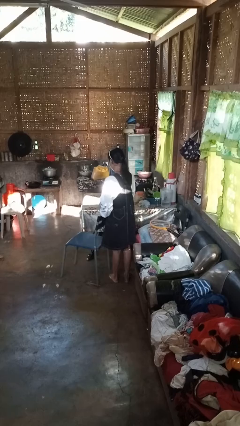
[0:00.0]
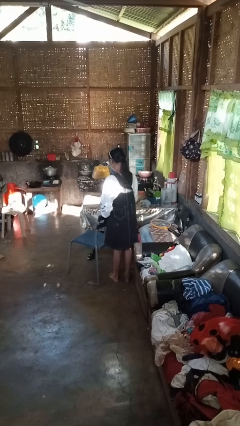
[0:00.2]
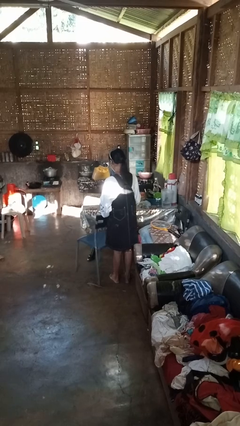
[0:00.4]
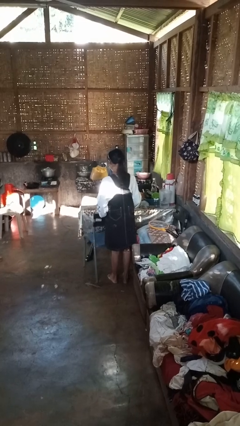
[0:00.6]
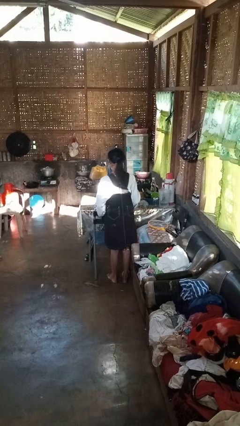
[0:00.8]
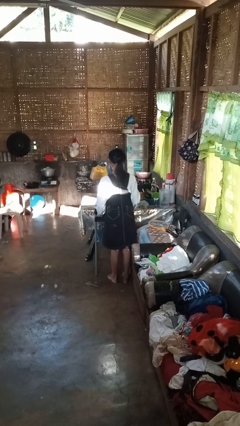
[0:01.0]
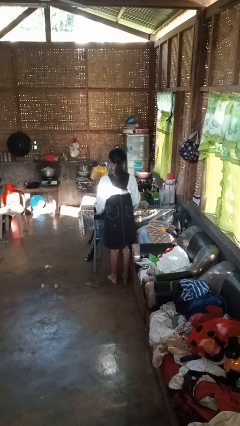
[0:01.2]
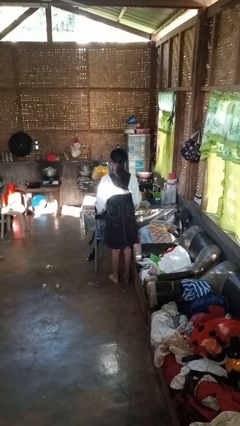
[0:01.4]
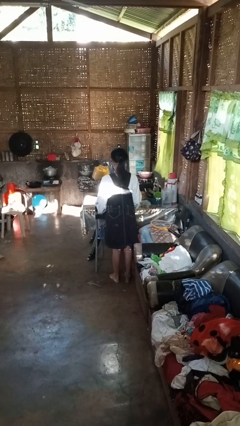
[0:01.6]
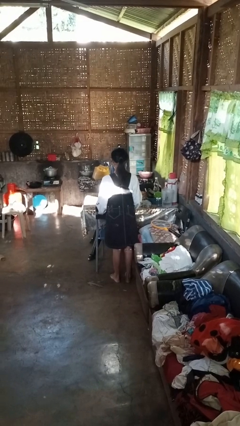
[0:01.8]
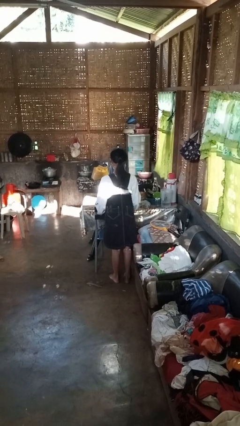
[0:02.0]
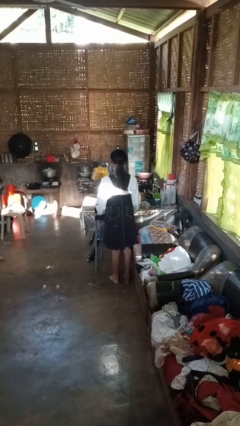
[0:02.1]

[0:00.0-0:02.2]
person pushes in chair

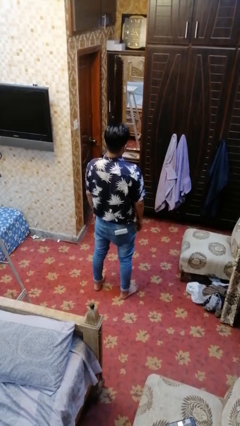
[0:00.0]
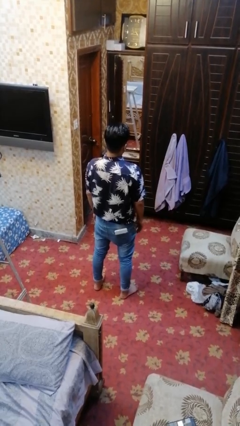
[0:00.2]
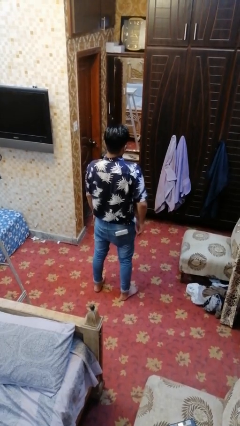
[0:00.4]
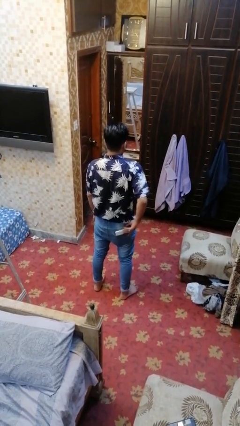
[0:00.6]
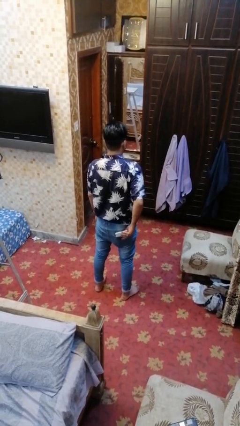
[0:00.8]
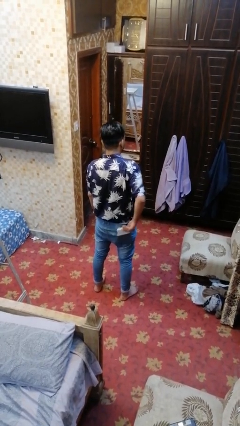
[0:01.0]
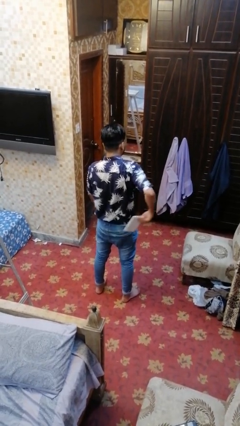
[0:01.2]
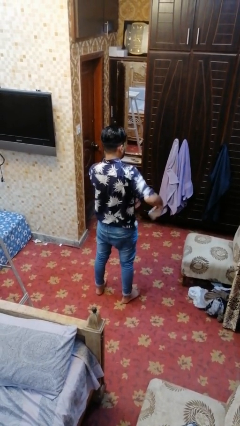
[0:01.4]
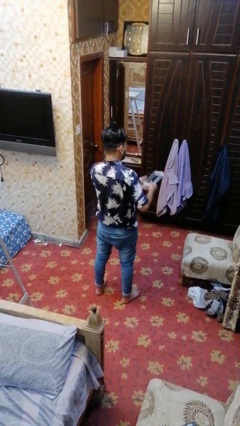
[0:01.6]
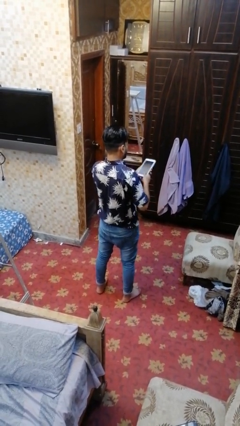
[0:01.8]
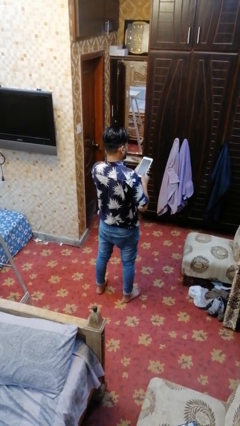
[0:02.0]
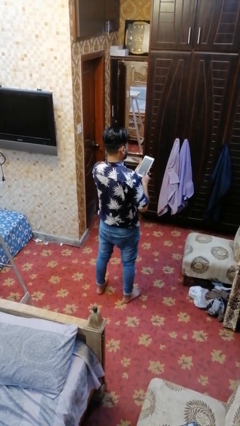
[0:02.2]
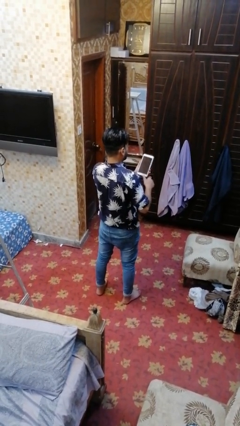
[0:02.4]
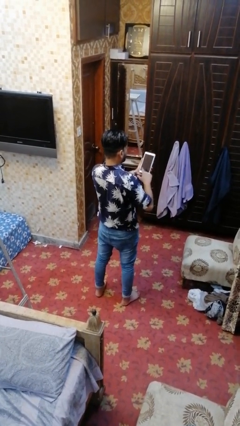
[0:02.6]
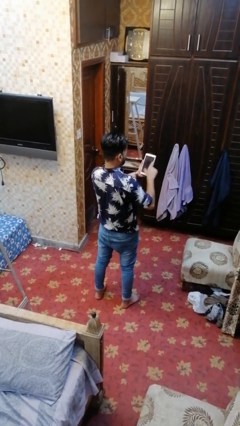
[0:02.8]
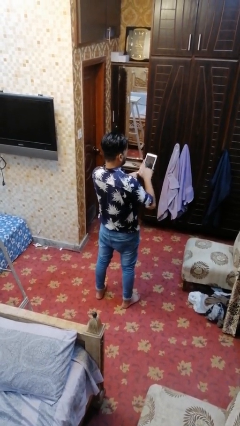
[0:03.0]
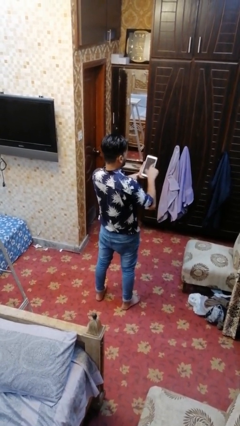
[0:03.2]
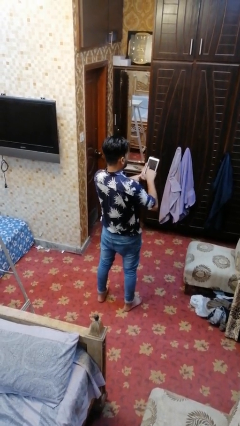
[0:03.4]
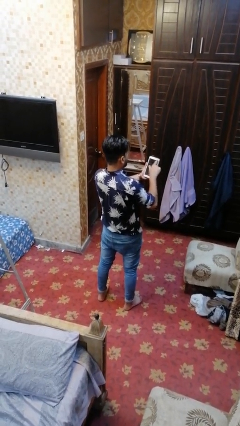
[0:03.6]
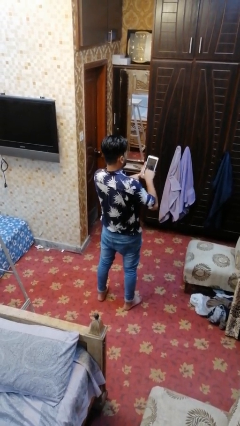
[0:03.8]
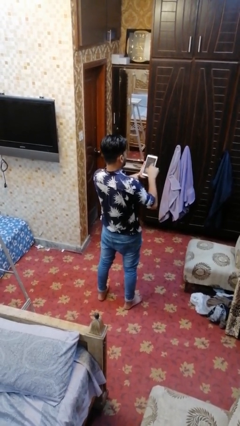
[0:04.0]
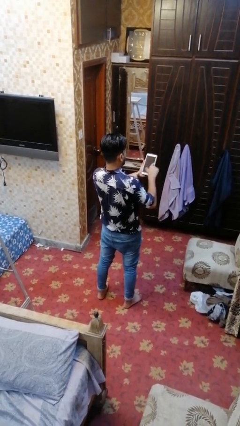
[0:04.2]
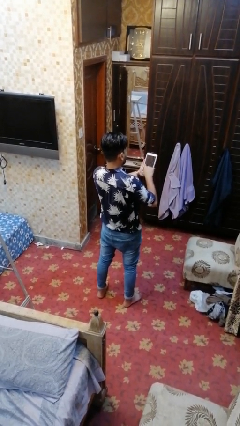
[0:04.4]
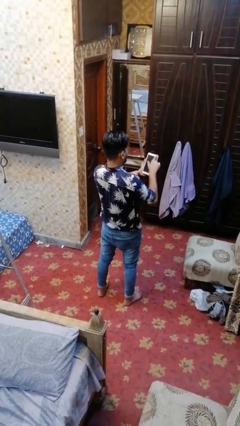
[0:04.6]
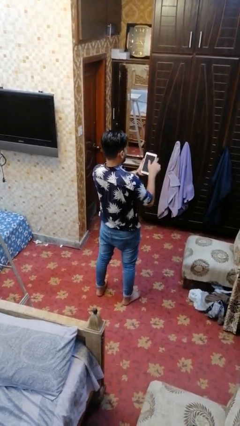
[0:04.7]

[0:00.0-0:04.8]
person takes phone from pocket

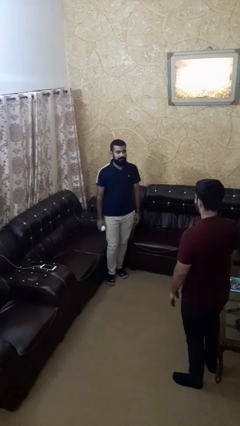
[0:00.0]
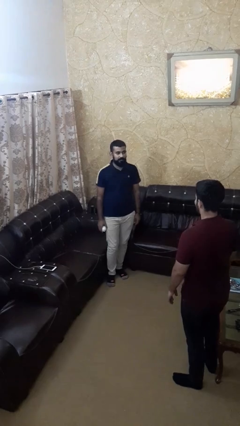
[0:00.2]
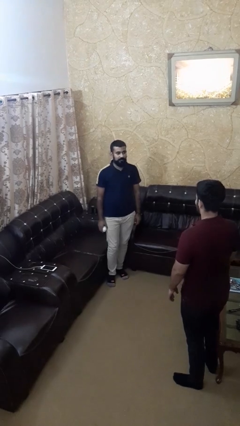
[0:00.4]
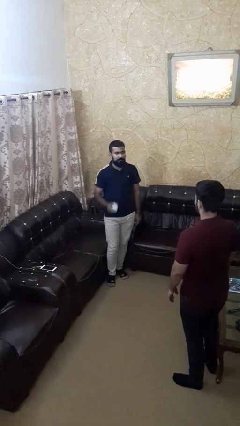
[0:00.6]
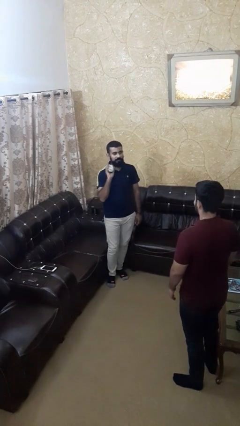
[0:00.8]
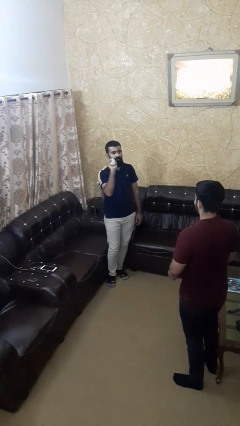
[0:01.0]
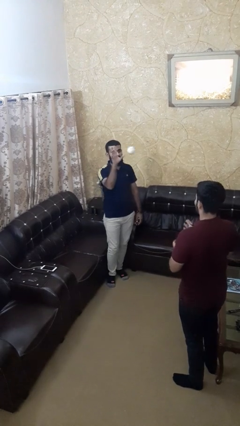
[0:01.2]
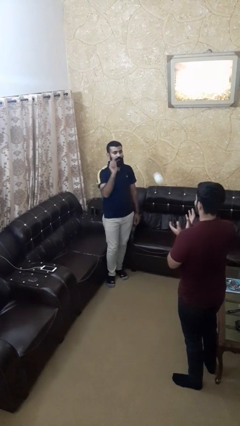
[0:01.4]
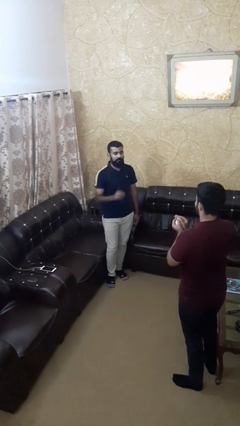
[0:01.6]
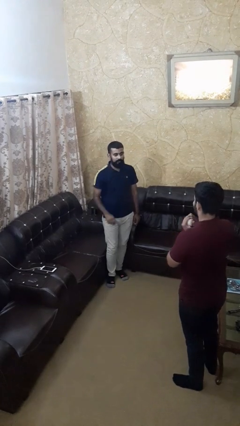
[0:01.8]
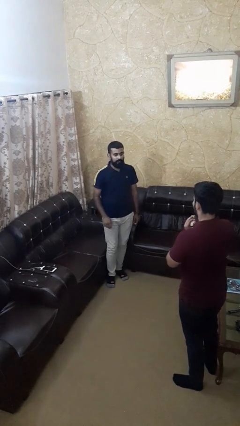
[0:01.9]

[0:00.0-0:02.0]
person throws object to person

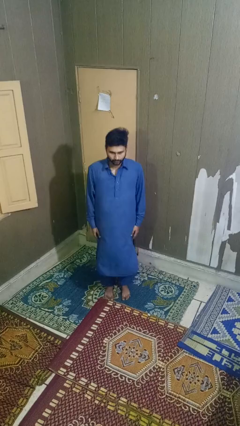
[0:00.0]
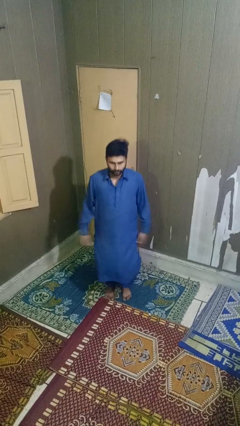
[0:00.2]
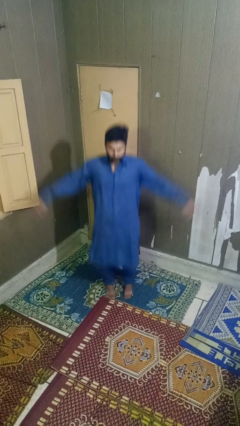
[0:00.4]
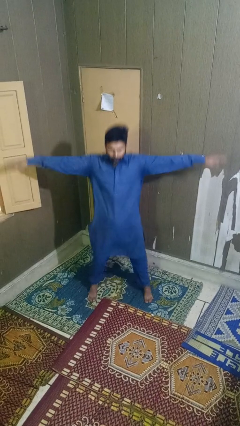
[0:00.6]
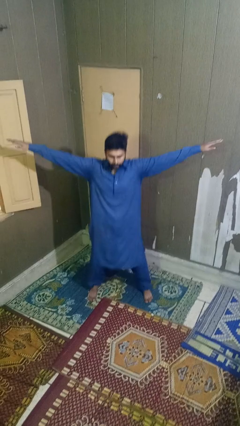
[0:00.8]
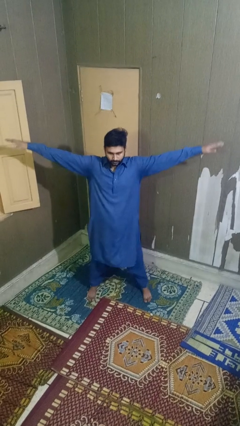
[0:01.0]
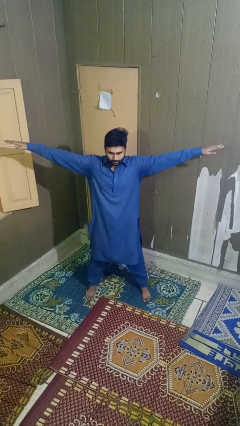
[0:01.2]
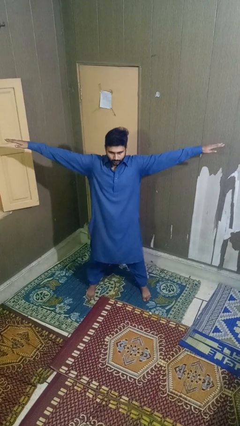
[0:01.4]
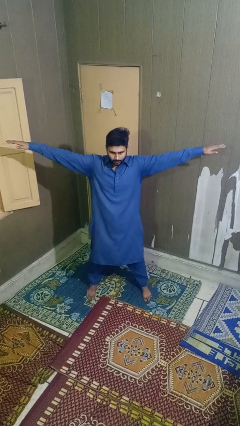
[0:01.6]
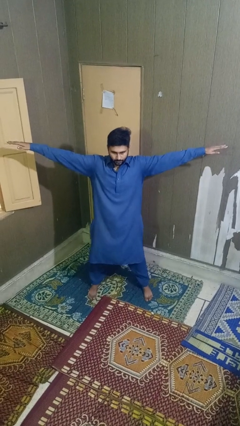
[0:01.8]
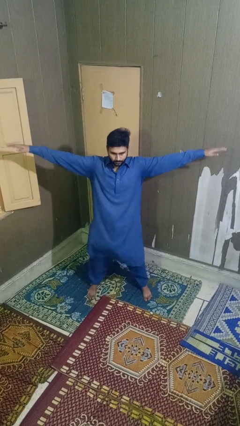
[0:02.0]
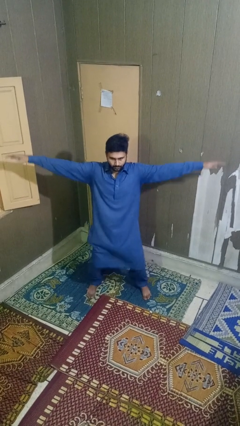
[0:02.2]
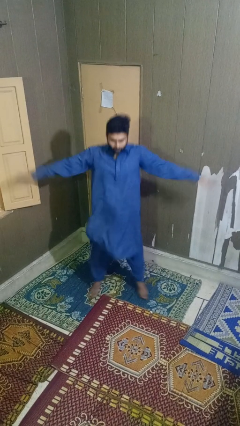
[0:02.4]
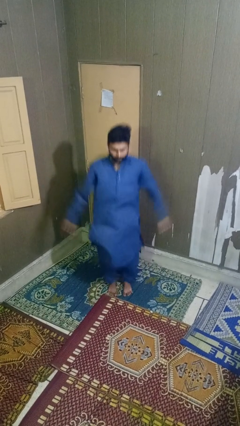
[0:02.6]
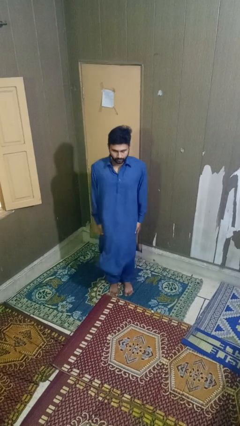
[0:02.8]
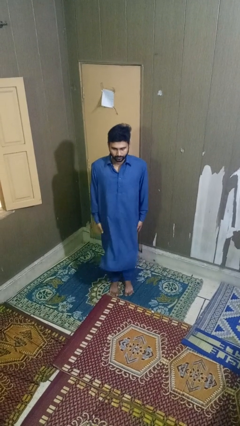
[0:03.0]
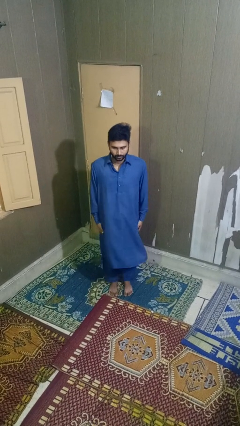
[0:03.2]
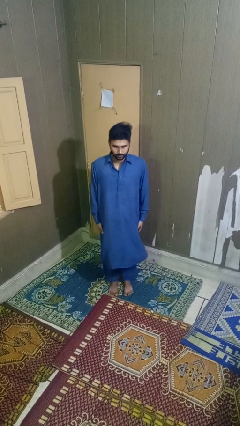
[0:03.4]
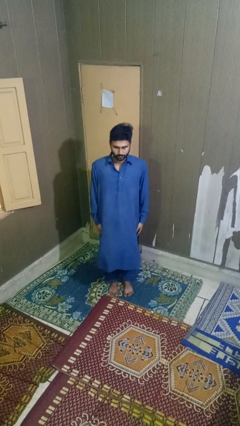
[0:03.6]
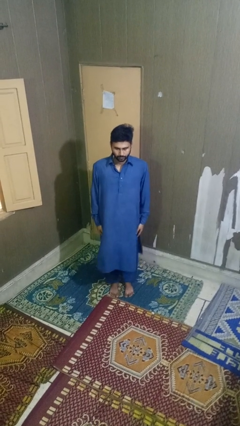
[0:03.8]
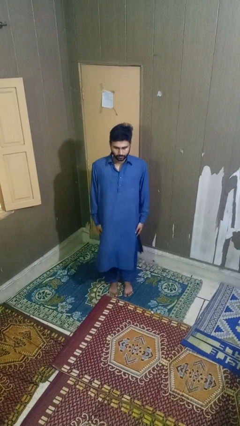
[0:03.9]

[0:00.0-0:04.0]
person exercises with jumping jacks

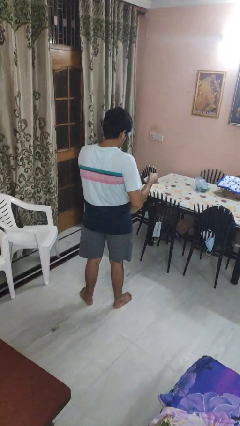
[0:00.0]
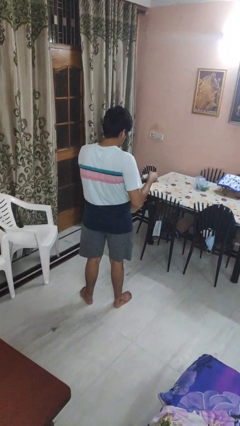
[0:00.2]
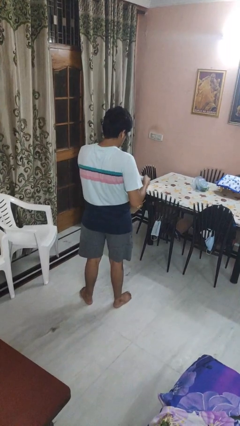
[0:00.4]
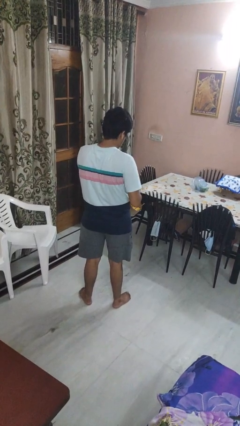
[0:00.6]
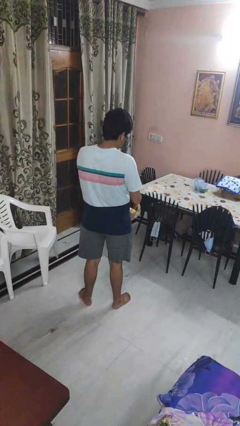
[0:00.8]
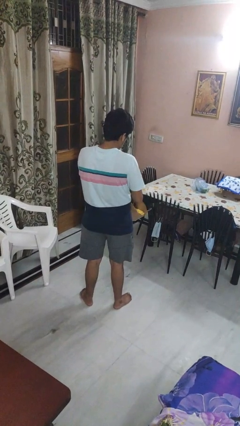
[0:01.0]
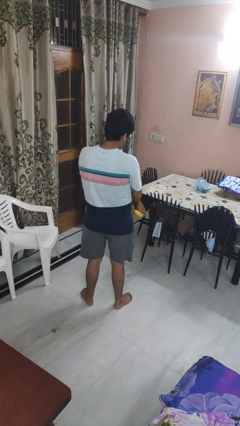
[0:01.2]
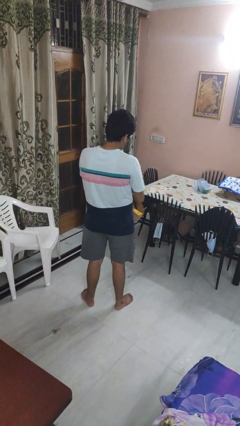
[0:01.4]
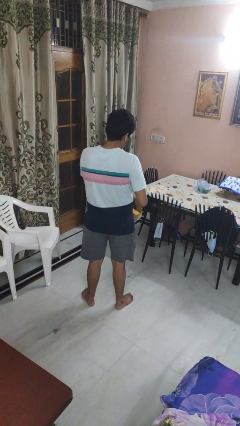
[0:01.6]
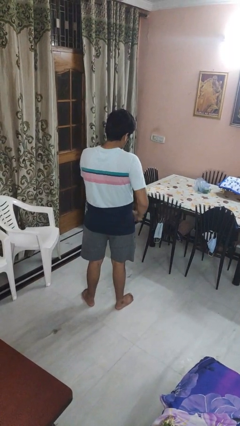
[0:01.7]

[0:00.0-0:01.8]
person puts object into bag

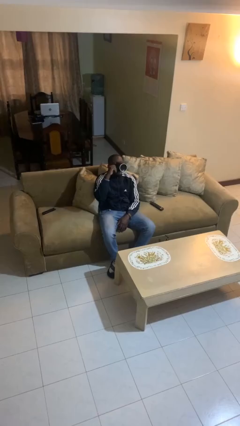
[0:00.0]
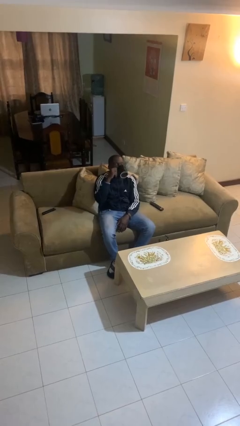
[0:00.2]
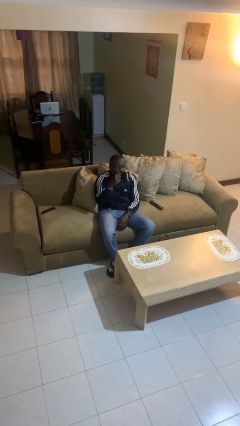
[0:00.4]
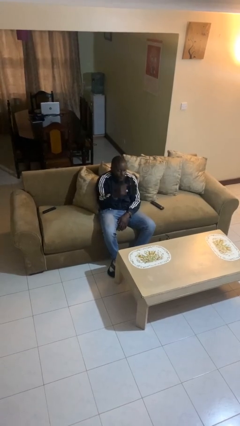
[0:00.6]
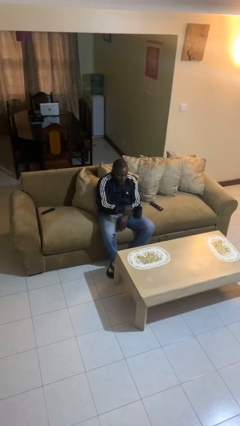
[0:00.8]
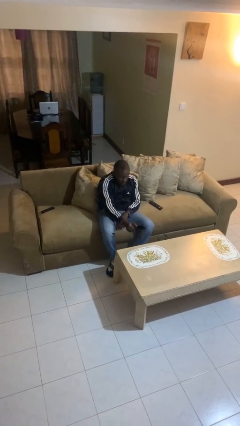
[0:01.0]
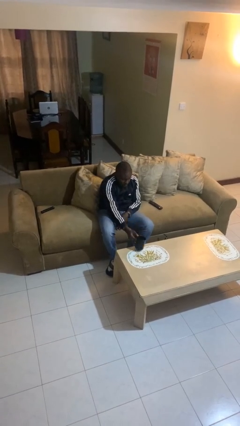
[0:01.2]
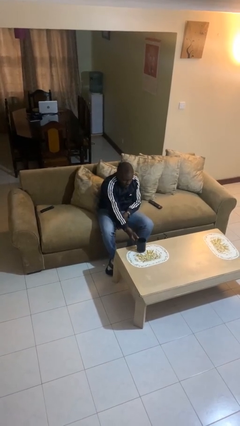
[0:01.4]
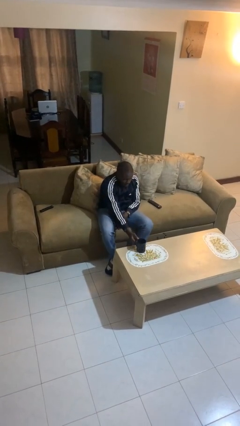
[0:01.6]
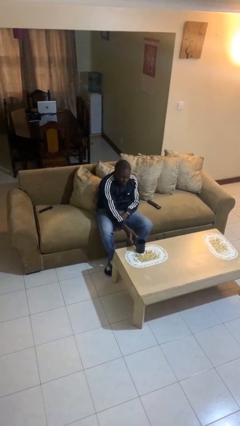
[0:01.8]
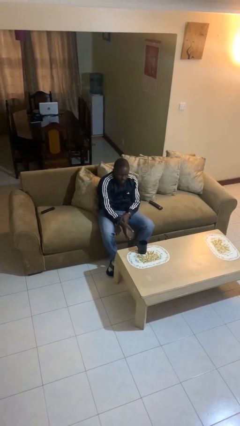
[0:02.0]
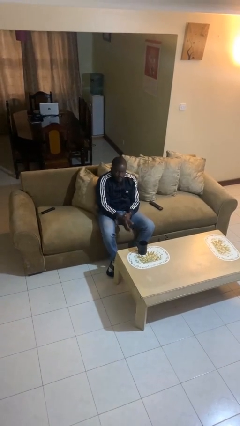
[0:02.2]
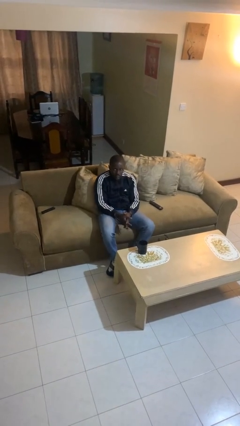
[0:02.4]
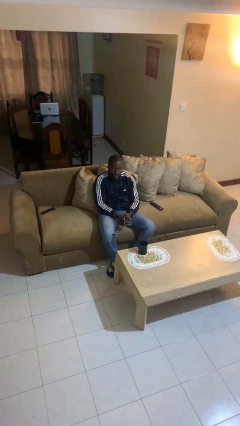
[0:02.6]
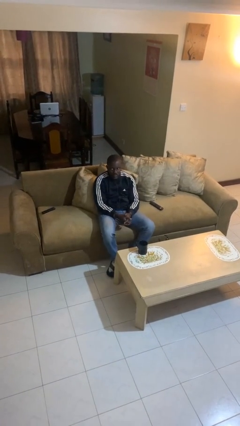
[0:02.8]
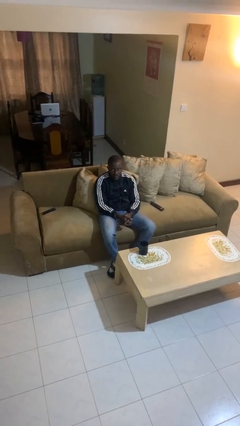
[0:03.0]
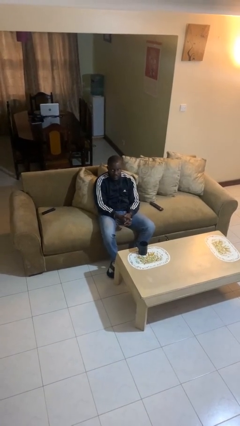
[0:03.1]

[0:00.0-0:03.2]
person puts down object on table
